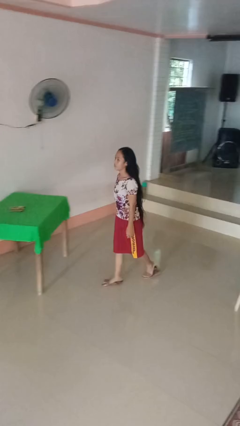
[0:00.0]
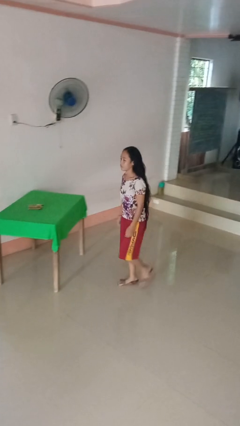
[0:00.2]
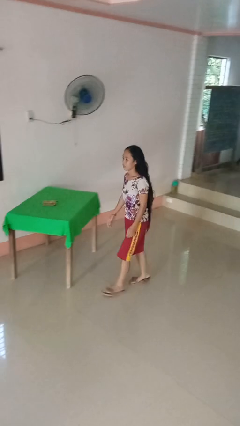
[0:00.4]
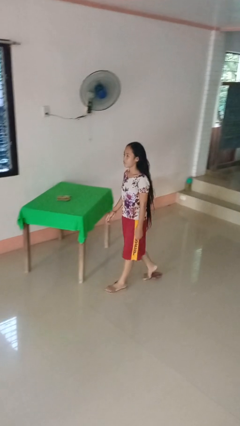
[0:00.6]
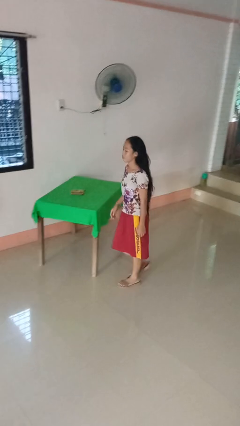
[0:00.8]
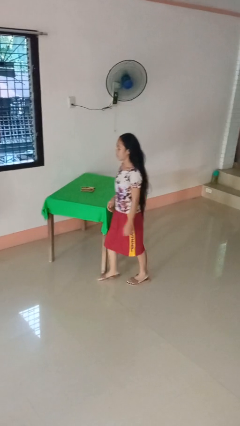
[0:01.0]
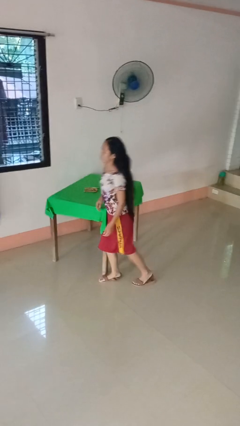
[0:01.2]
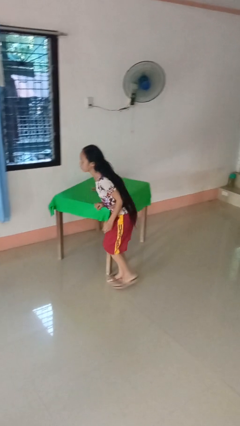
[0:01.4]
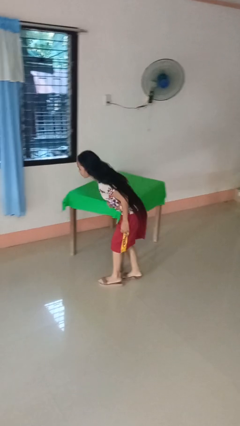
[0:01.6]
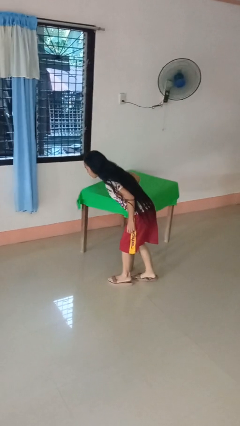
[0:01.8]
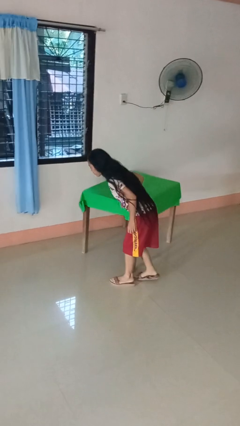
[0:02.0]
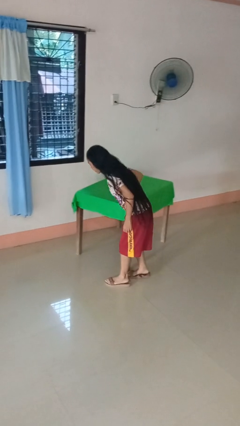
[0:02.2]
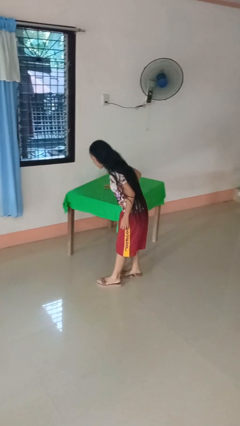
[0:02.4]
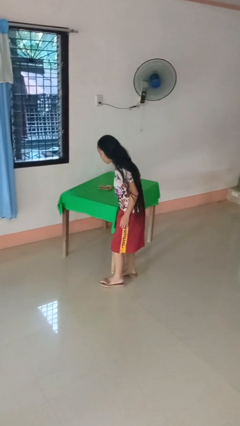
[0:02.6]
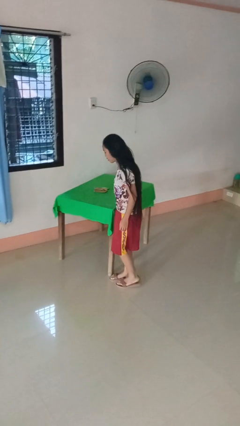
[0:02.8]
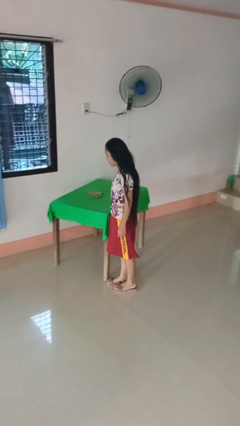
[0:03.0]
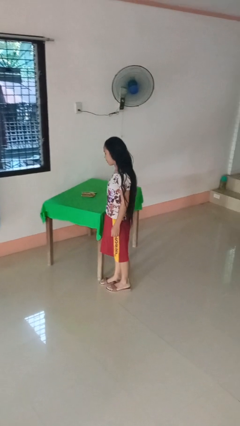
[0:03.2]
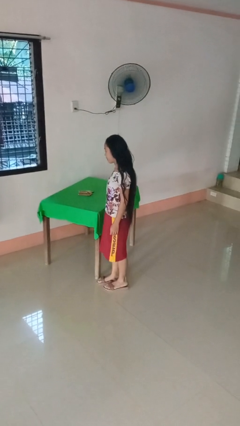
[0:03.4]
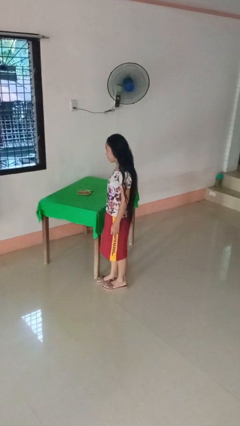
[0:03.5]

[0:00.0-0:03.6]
person bumps into table

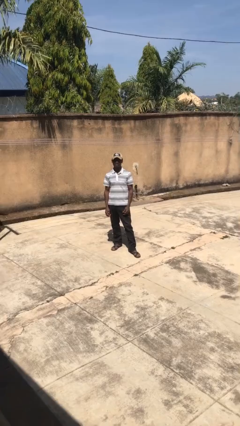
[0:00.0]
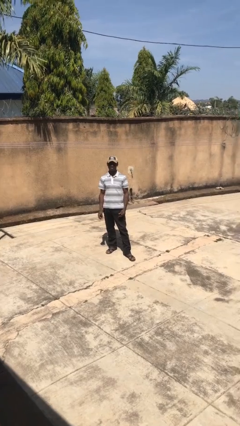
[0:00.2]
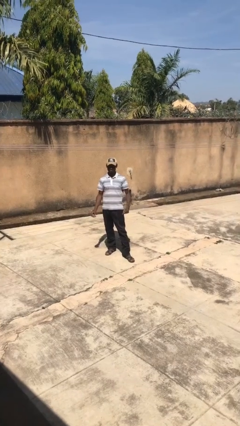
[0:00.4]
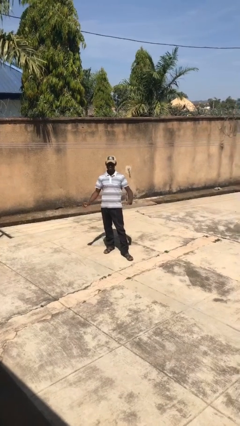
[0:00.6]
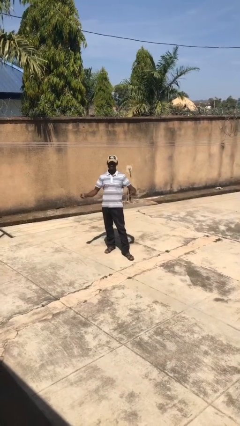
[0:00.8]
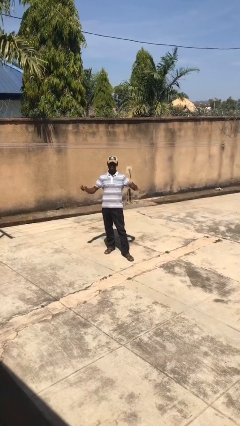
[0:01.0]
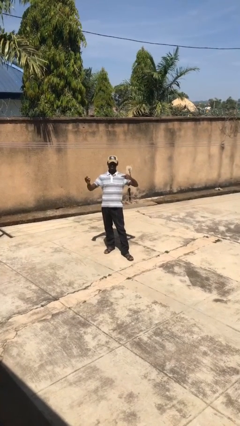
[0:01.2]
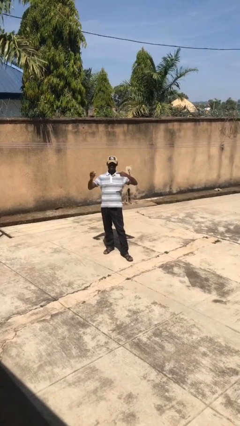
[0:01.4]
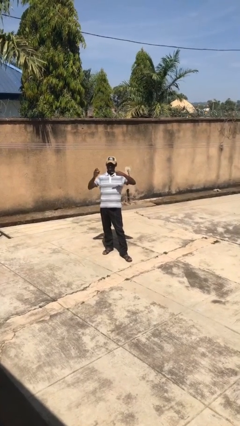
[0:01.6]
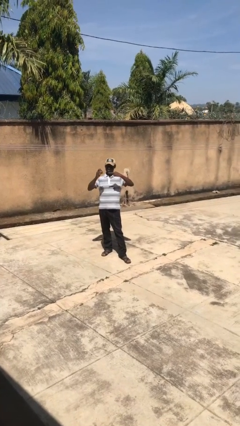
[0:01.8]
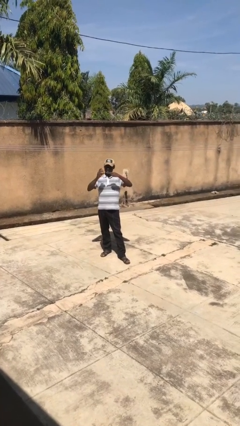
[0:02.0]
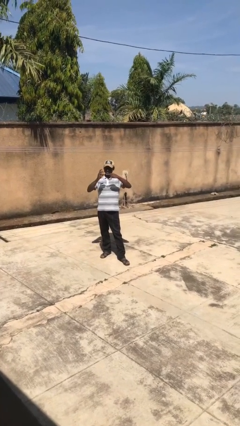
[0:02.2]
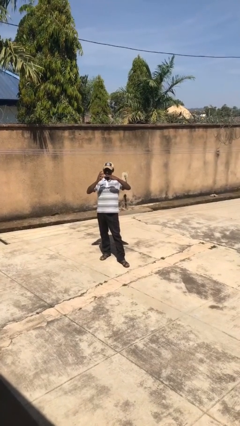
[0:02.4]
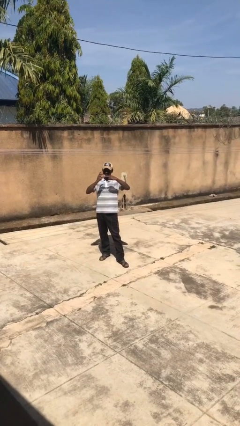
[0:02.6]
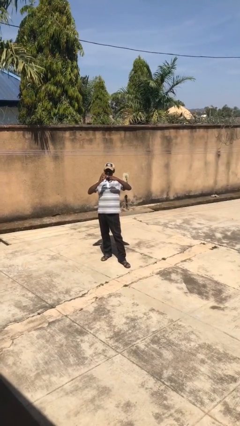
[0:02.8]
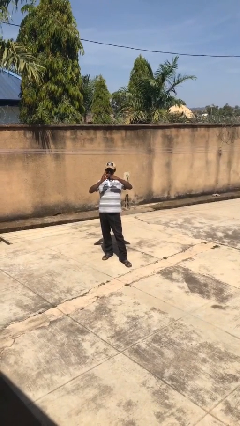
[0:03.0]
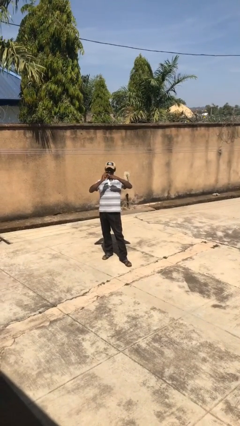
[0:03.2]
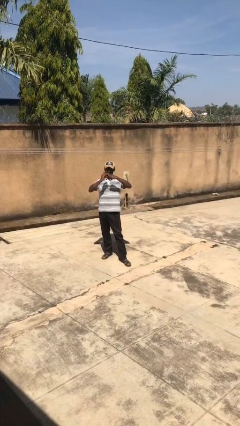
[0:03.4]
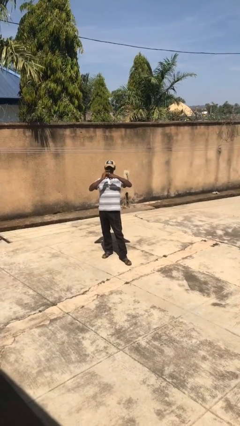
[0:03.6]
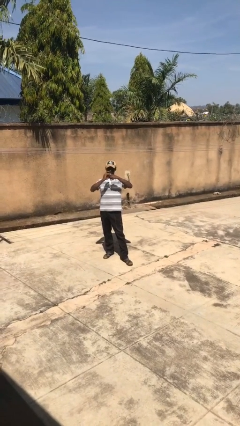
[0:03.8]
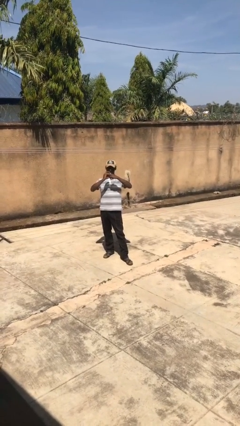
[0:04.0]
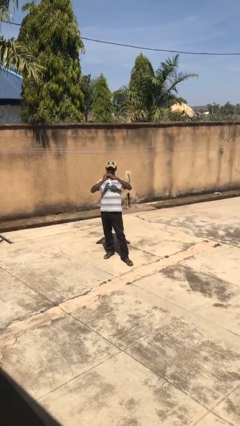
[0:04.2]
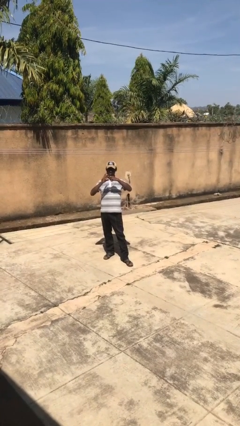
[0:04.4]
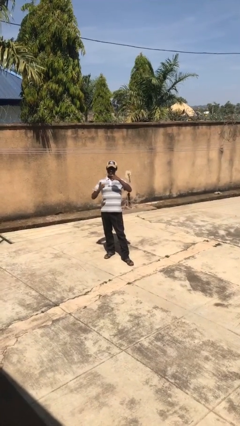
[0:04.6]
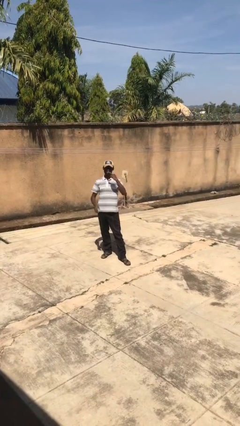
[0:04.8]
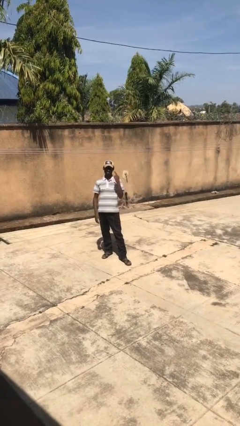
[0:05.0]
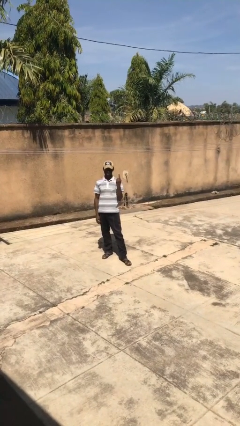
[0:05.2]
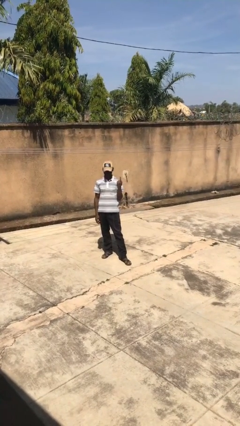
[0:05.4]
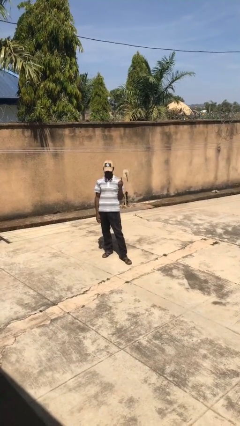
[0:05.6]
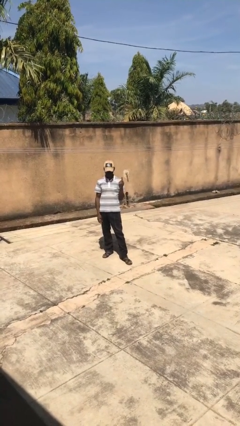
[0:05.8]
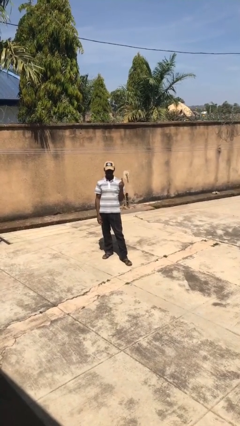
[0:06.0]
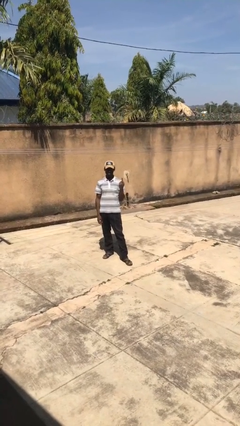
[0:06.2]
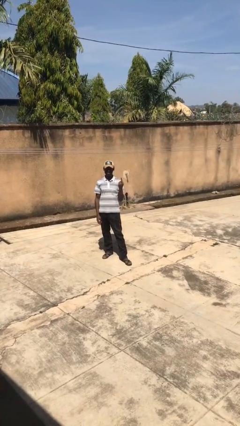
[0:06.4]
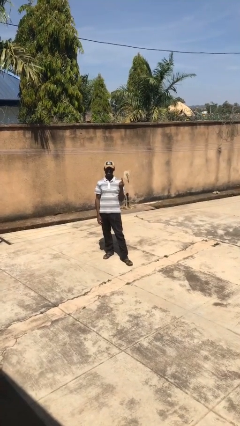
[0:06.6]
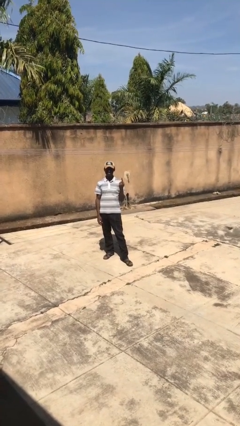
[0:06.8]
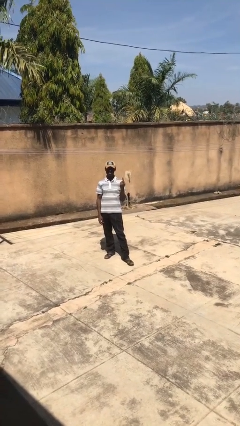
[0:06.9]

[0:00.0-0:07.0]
person puts on ring

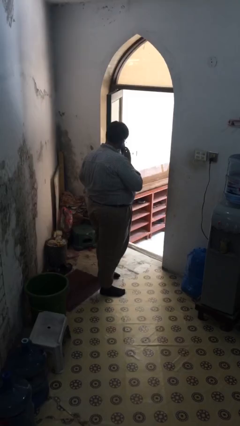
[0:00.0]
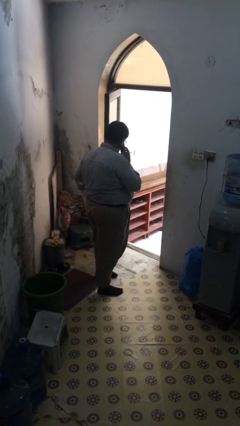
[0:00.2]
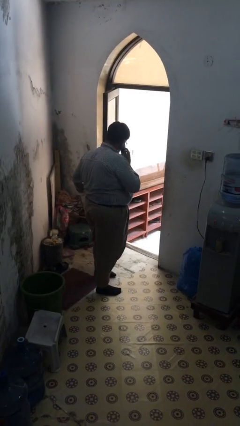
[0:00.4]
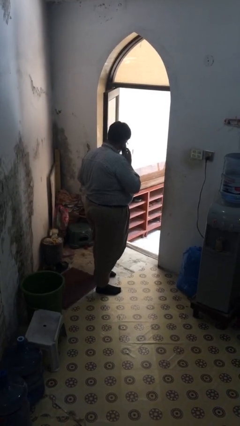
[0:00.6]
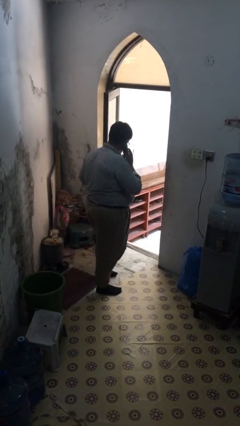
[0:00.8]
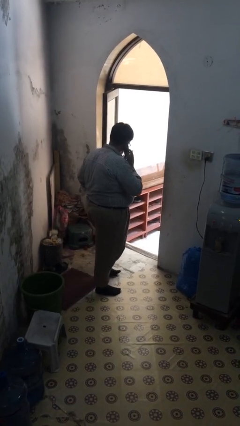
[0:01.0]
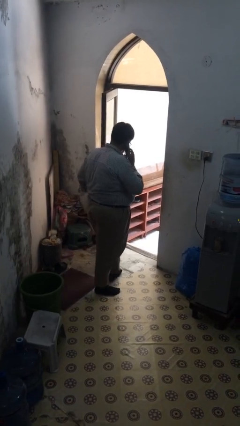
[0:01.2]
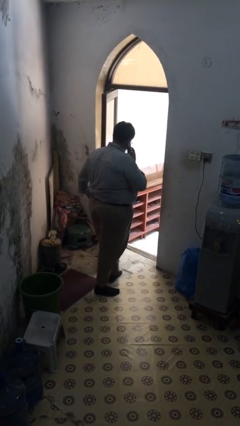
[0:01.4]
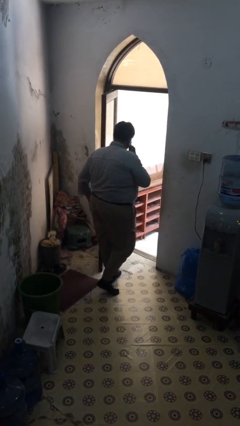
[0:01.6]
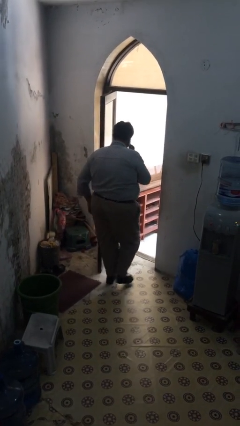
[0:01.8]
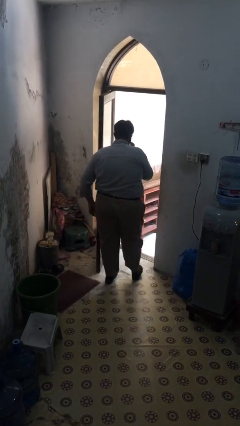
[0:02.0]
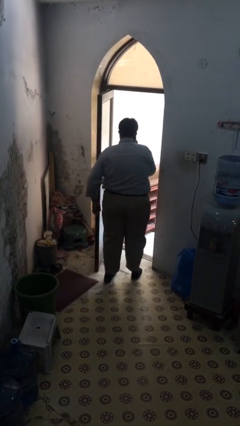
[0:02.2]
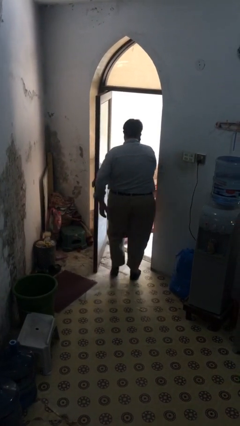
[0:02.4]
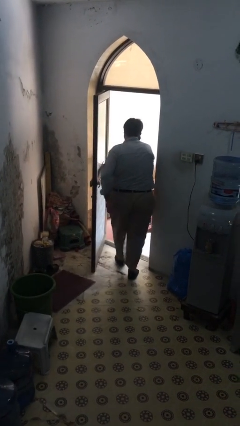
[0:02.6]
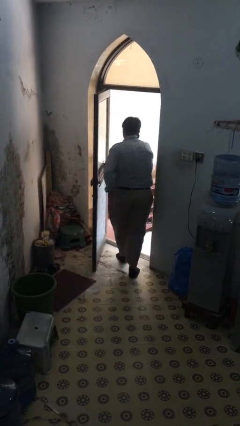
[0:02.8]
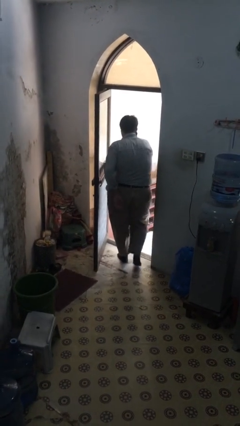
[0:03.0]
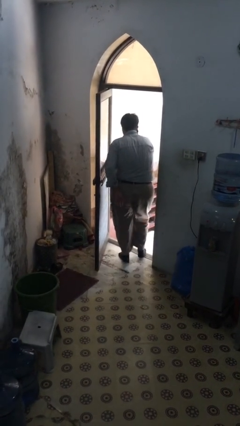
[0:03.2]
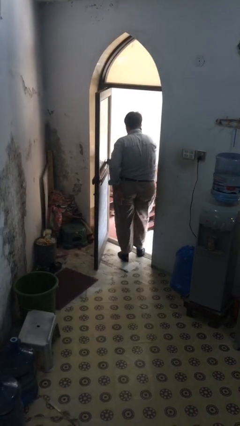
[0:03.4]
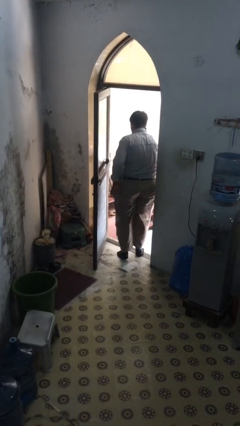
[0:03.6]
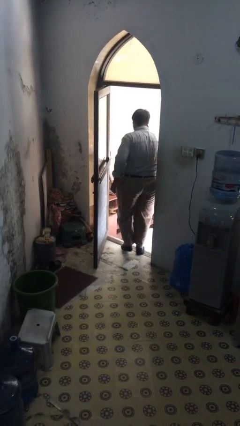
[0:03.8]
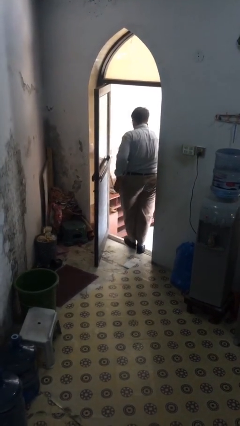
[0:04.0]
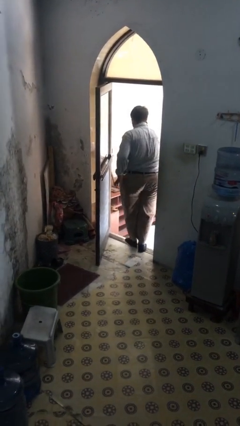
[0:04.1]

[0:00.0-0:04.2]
person exits scene through structure

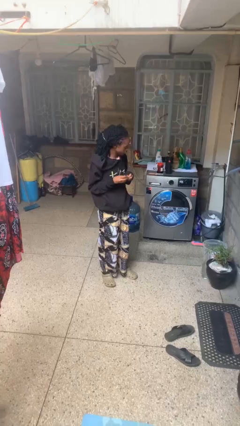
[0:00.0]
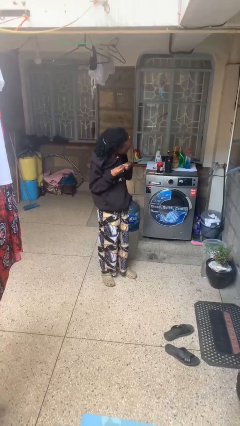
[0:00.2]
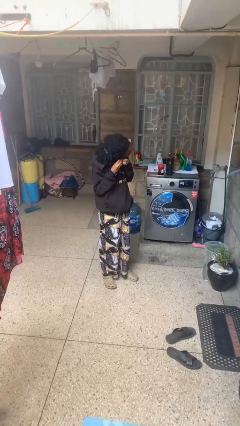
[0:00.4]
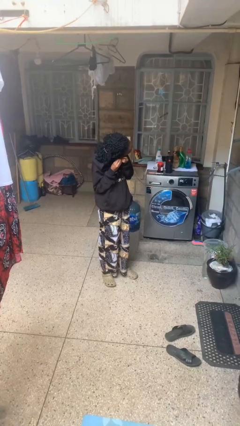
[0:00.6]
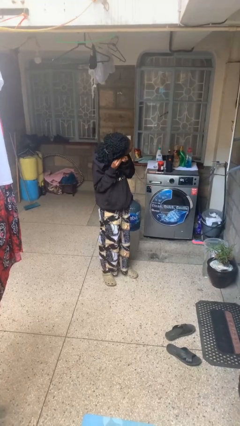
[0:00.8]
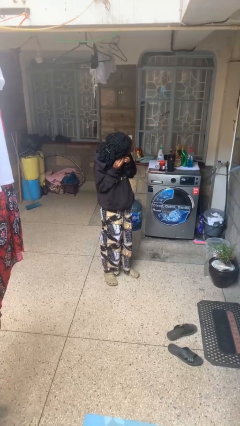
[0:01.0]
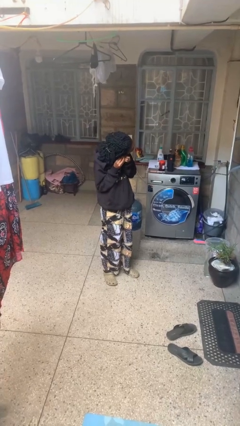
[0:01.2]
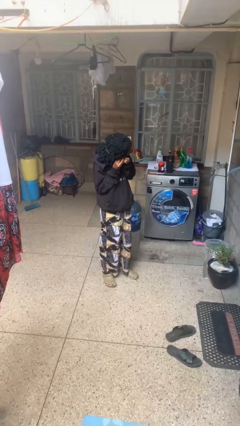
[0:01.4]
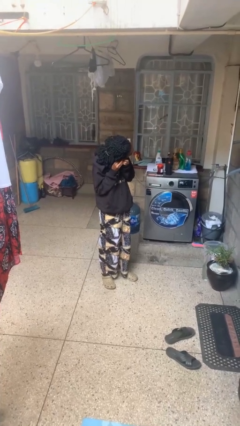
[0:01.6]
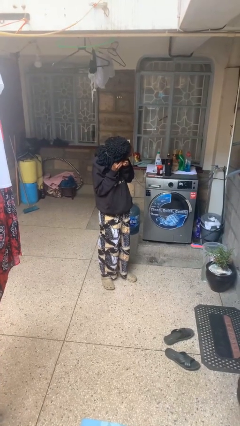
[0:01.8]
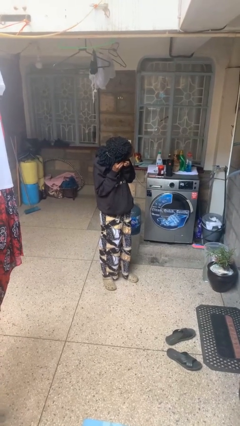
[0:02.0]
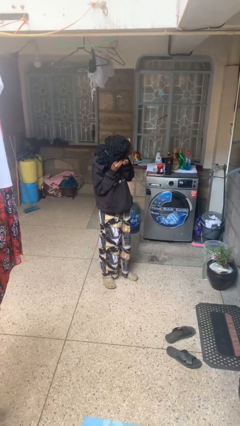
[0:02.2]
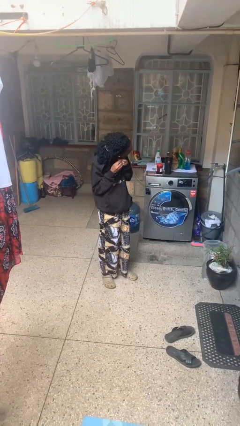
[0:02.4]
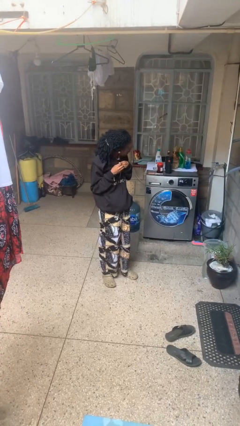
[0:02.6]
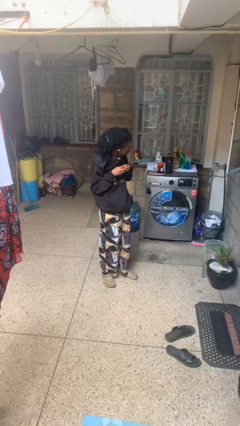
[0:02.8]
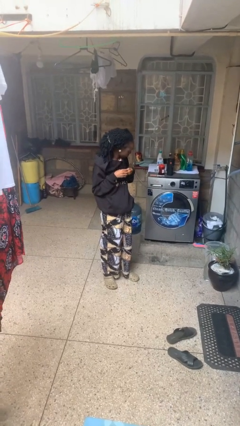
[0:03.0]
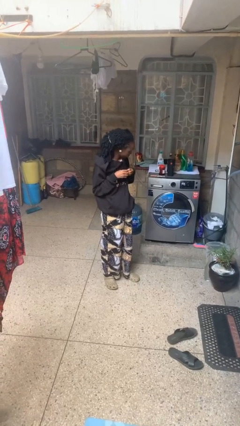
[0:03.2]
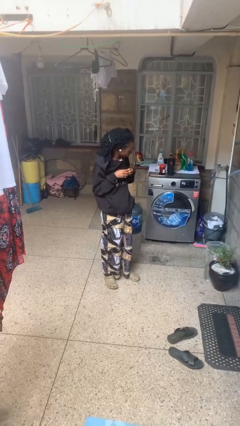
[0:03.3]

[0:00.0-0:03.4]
person puts on earrings
